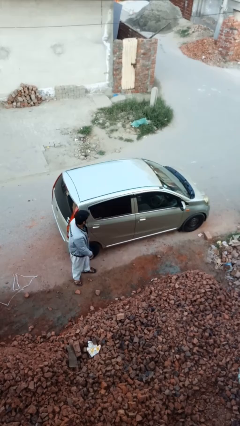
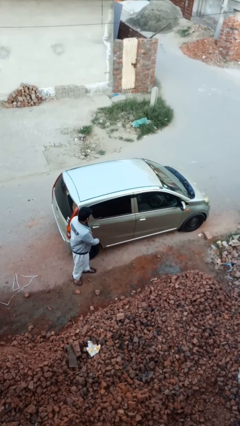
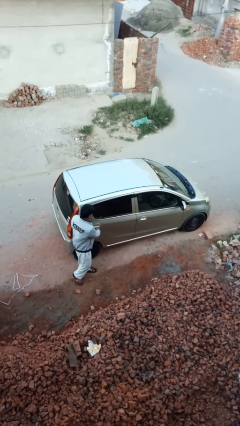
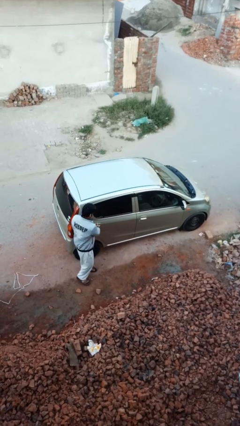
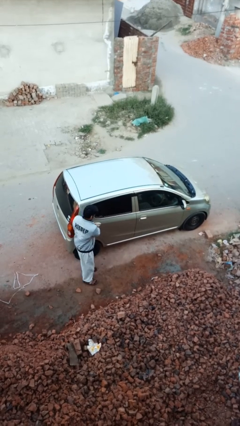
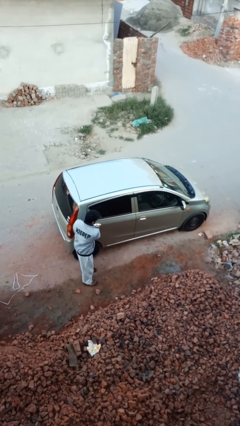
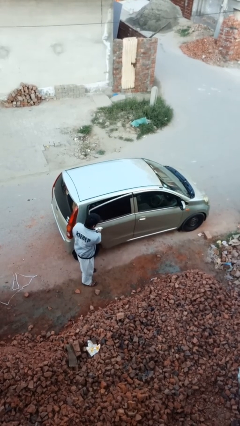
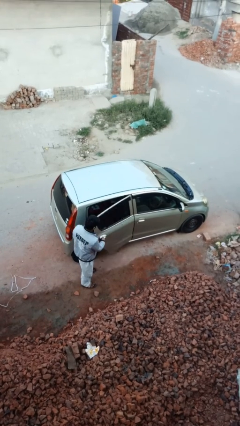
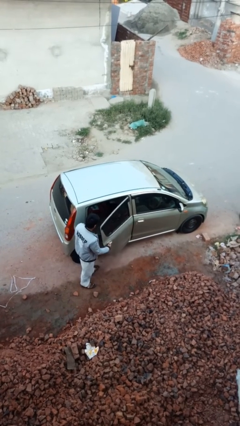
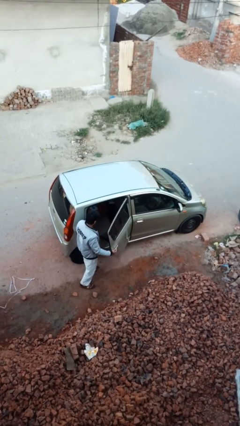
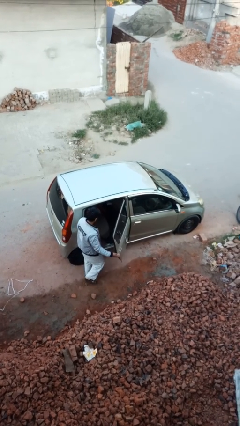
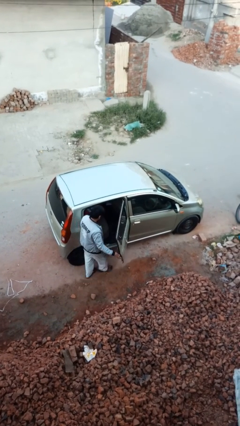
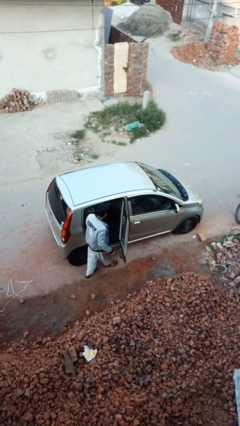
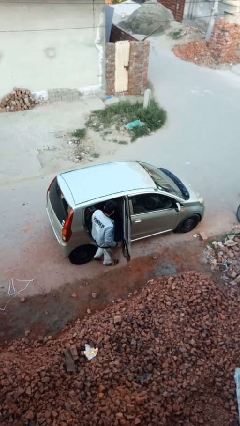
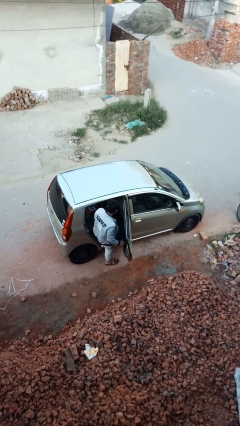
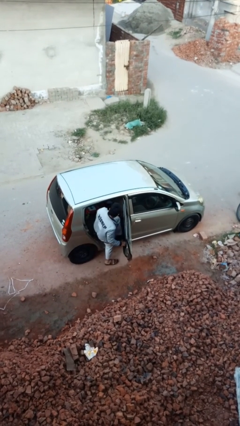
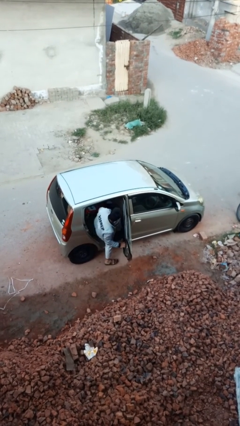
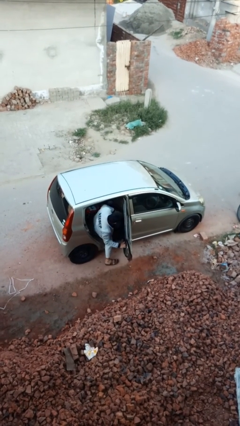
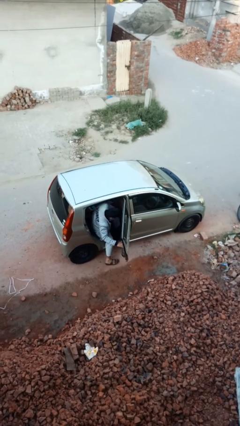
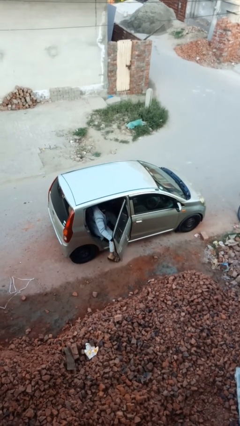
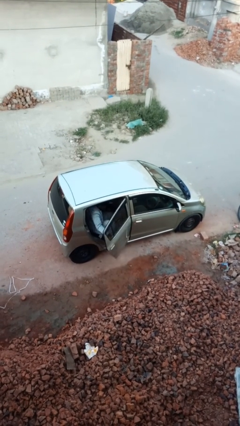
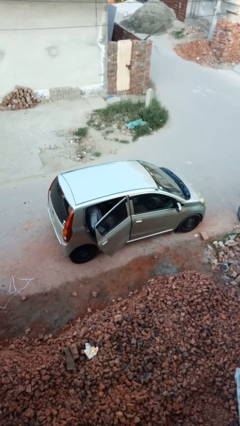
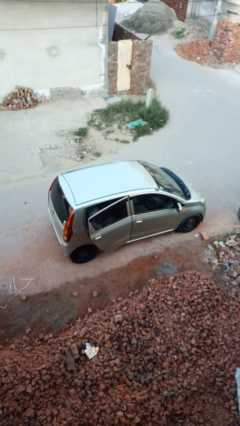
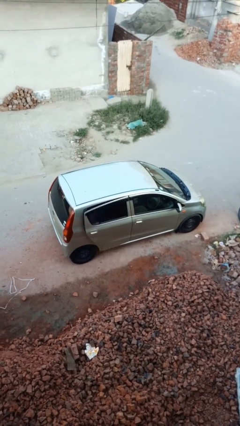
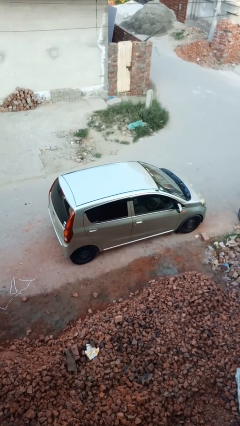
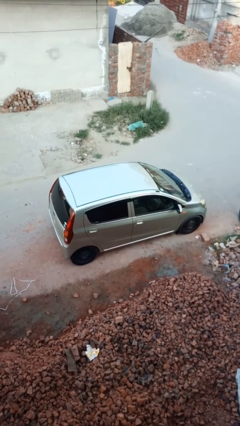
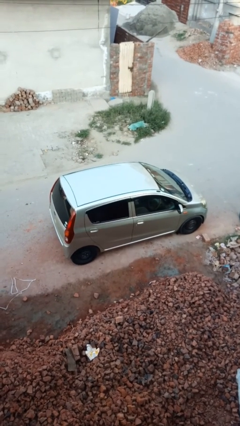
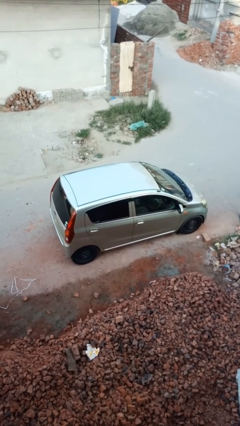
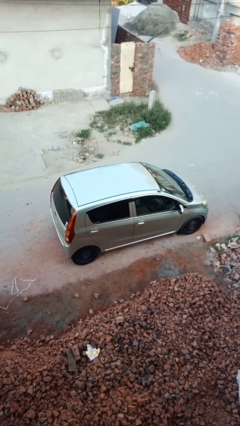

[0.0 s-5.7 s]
car picks up person

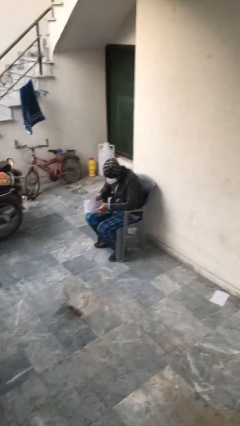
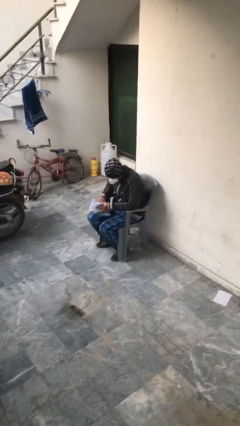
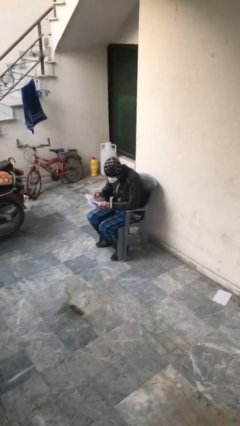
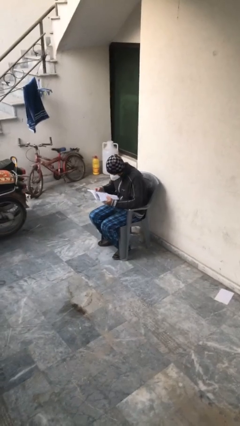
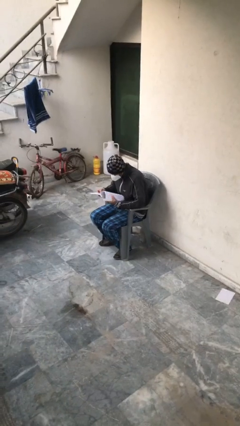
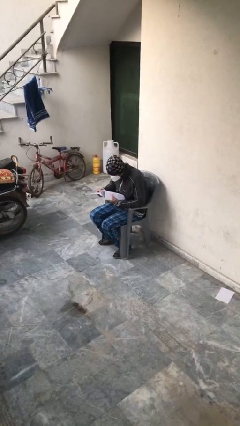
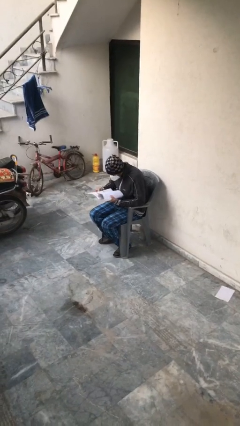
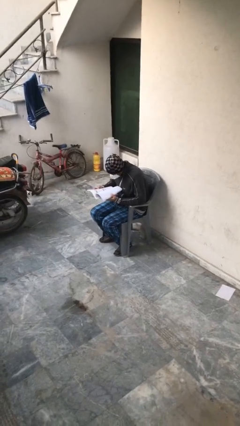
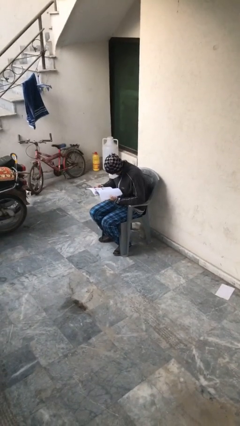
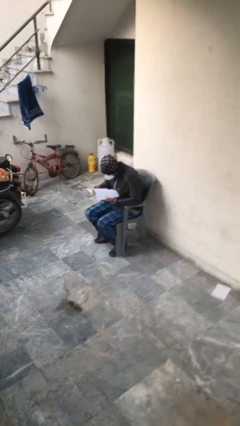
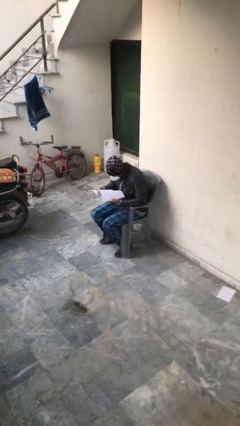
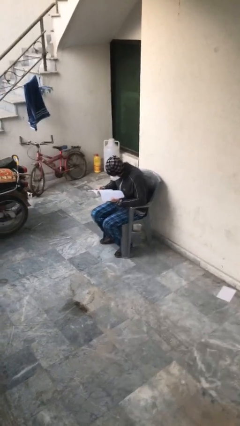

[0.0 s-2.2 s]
person reads document

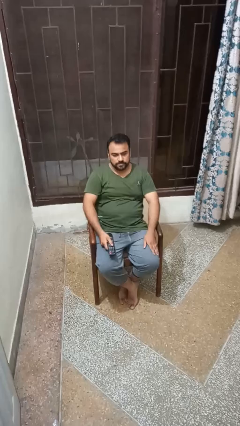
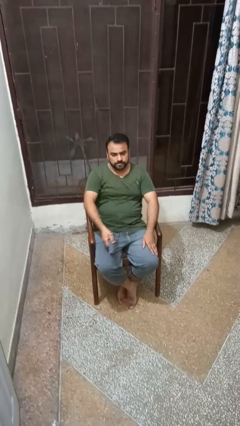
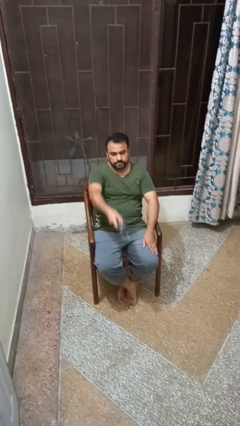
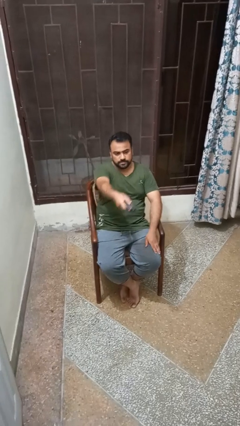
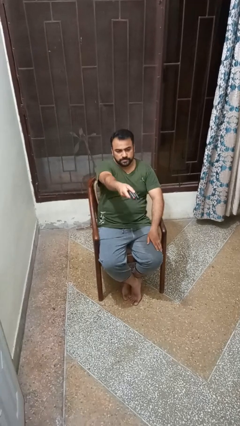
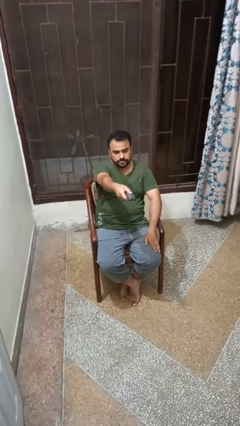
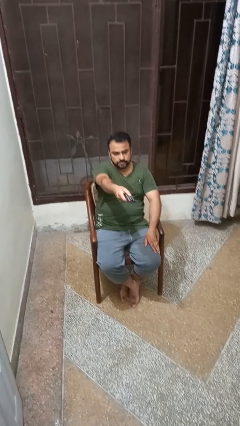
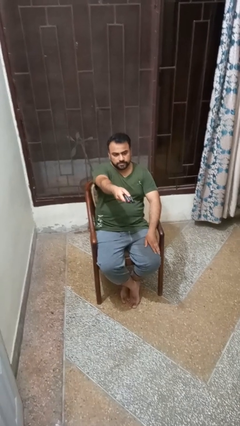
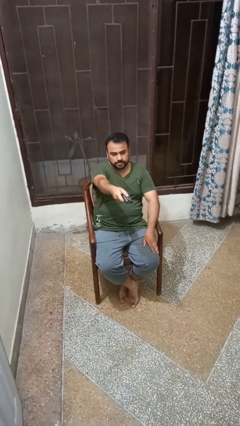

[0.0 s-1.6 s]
person uses television remote

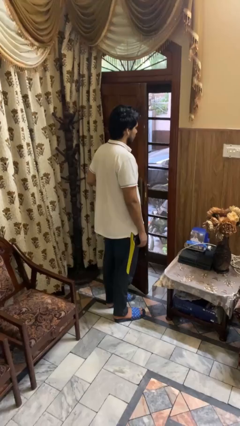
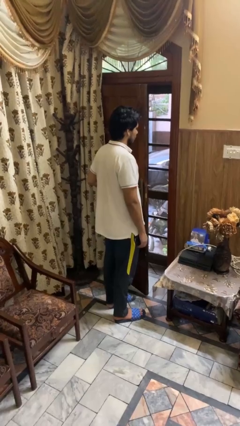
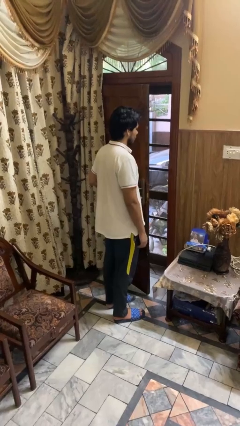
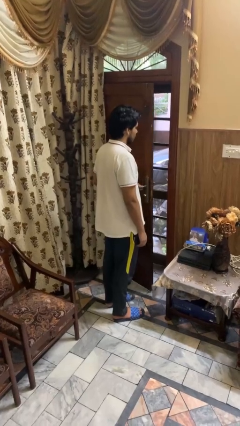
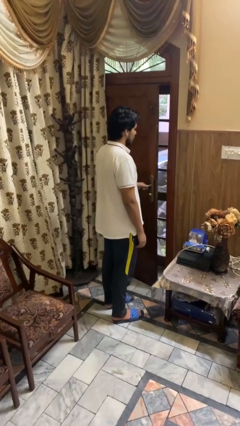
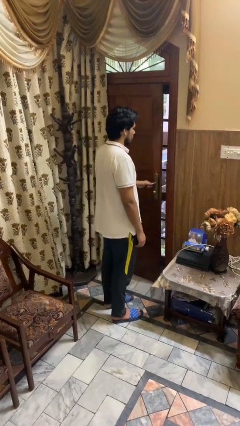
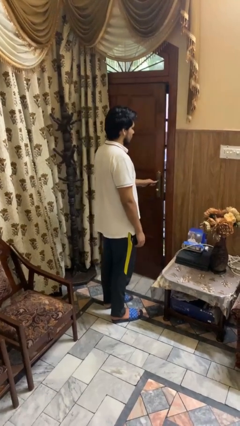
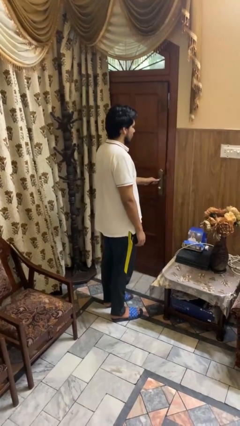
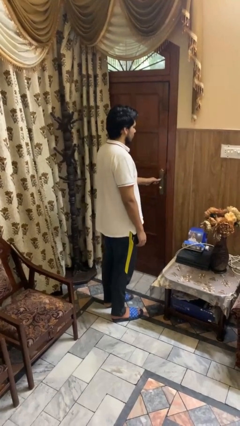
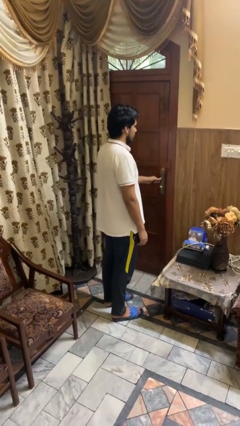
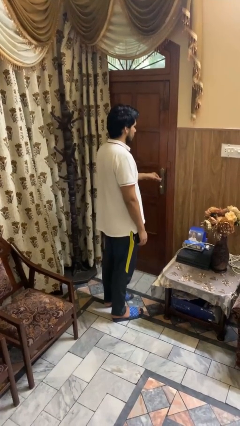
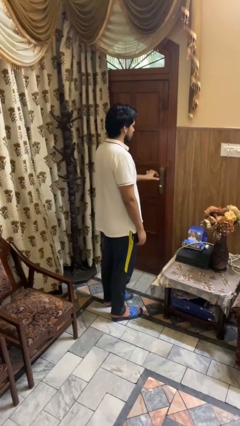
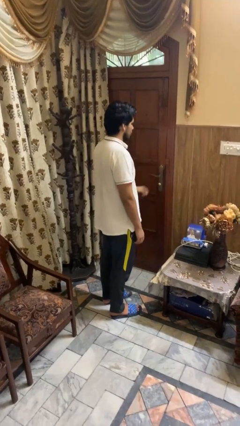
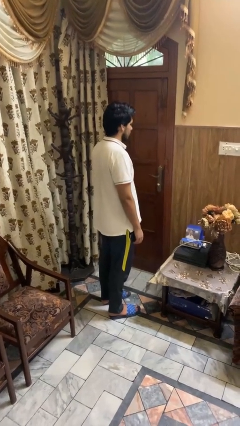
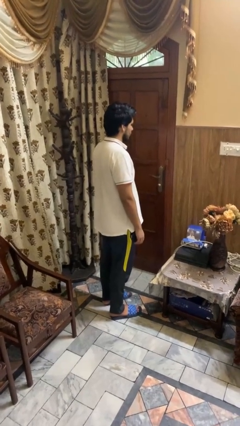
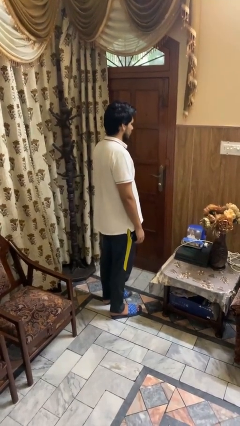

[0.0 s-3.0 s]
person closes facility door

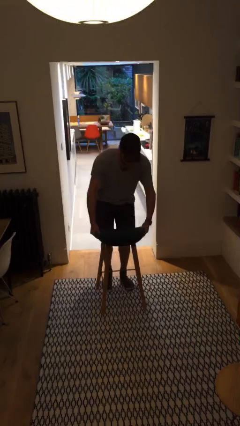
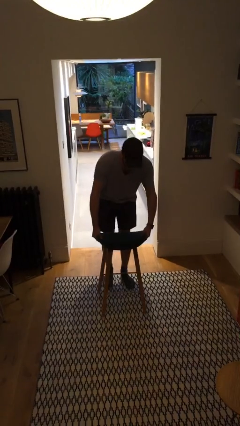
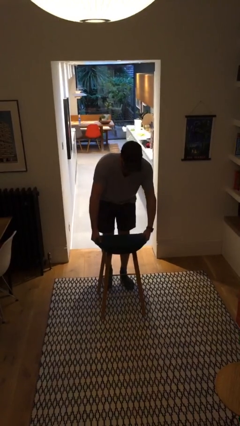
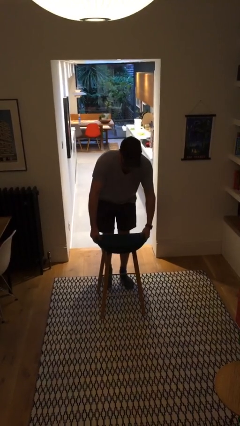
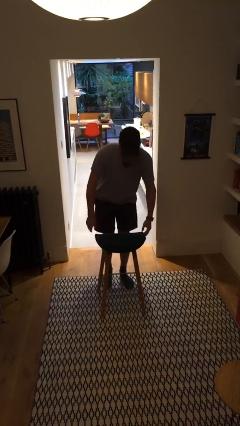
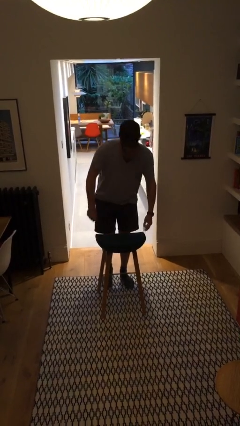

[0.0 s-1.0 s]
person puts down object on floor

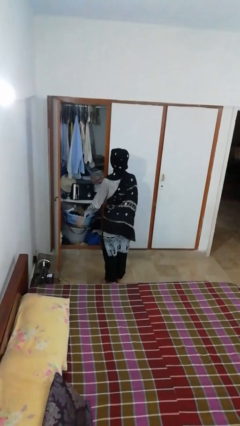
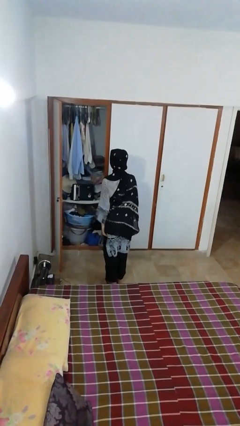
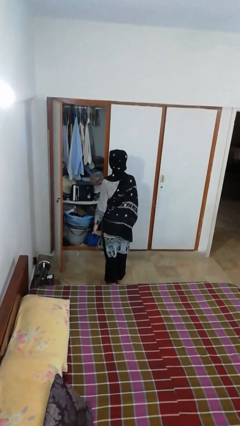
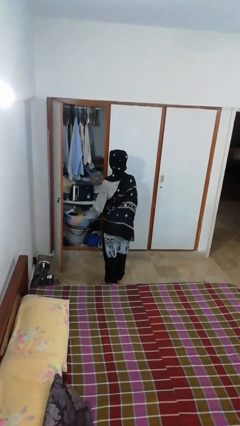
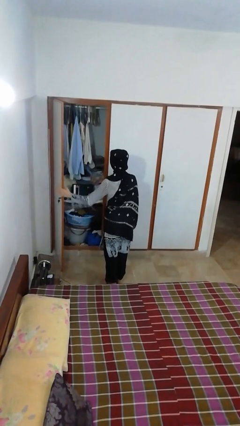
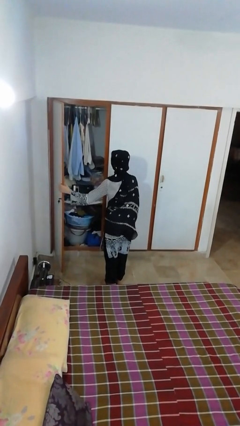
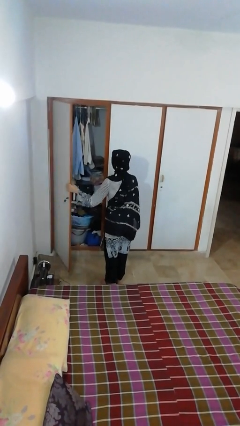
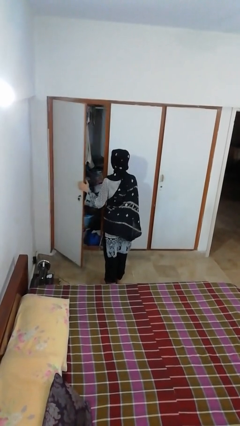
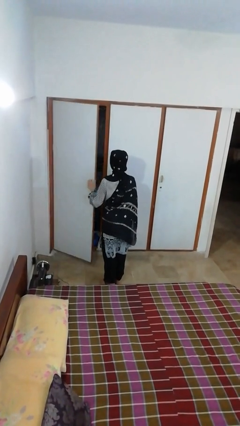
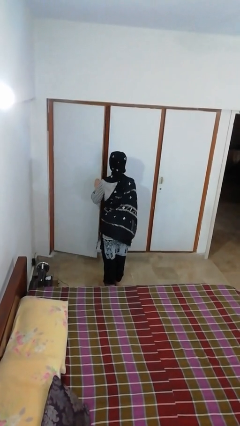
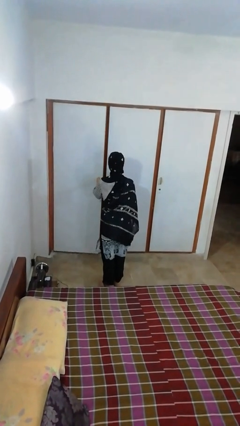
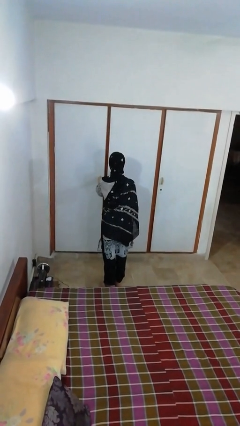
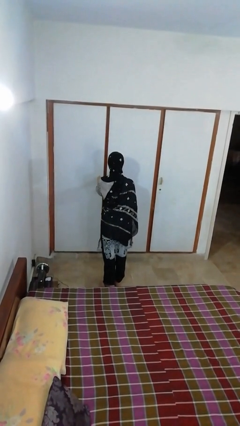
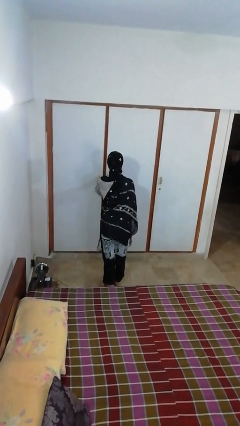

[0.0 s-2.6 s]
person closes closet door

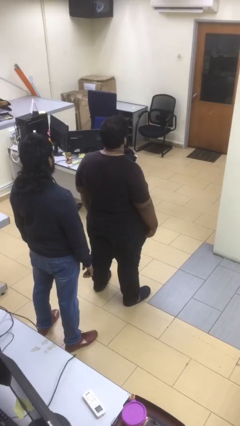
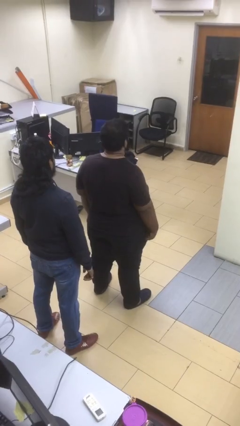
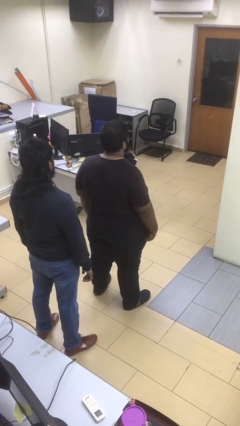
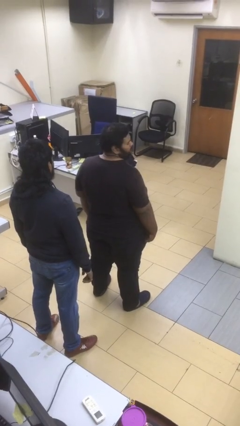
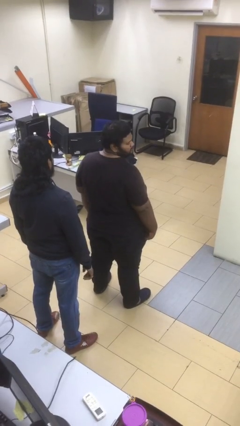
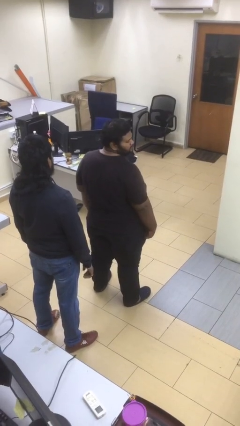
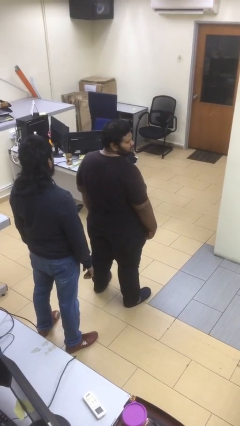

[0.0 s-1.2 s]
person looks over shoulder
